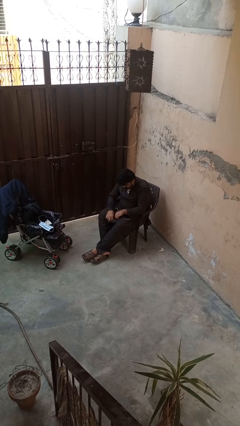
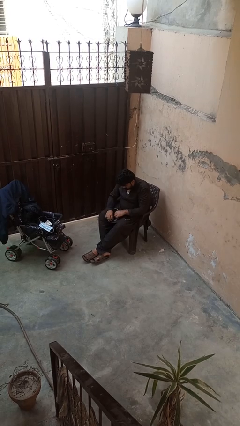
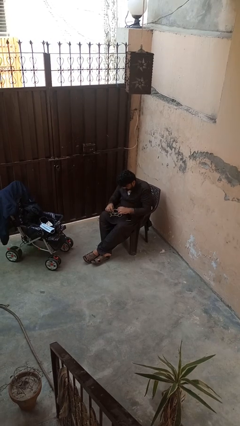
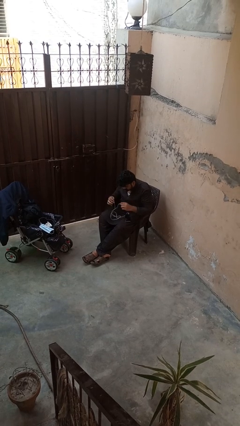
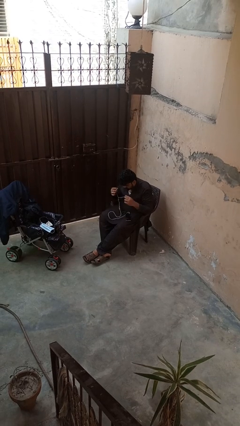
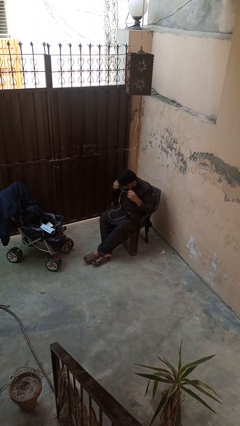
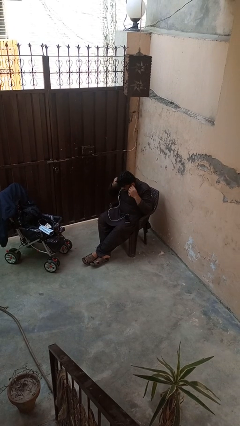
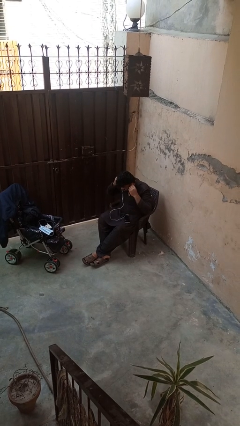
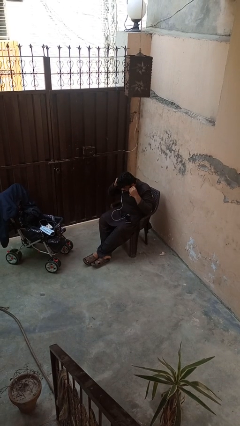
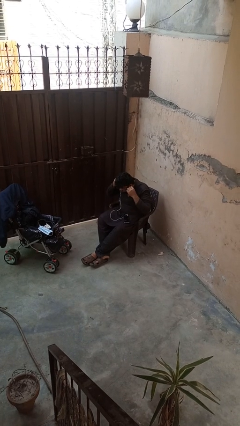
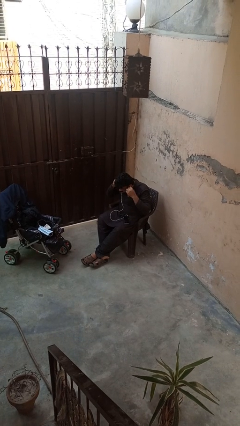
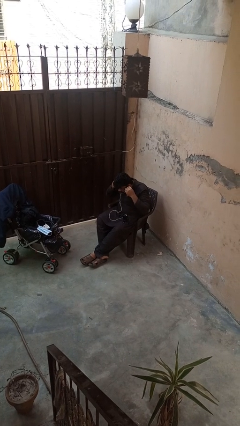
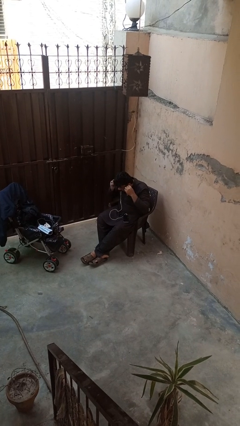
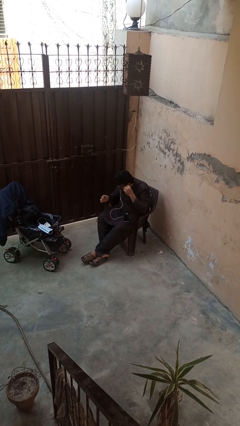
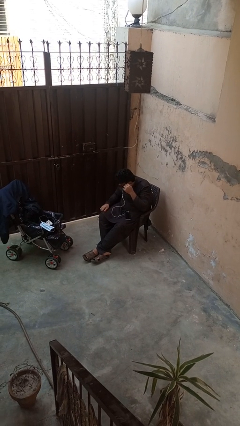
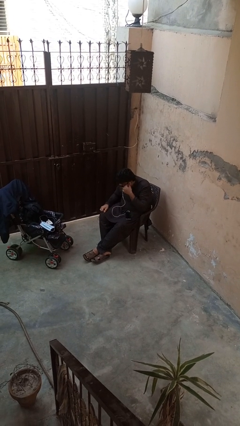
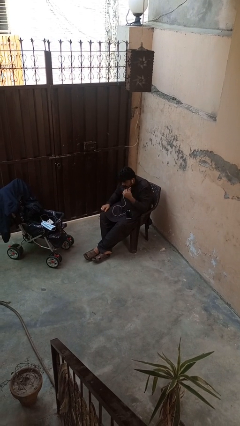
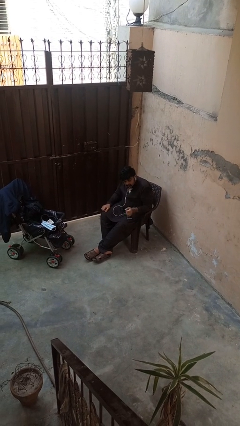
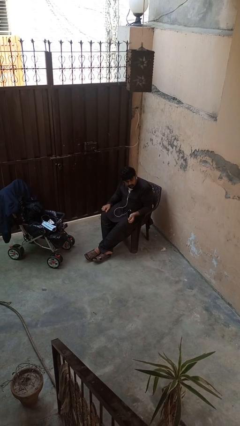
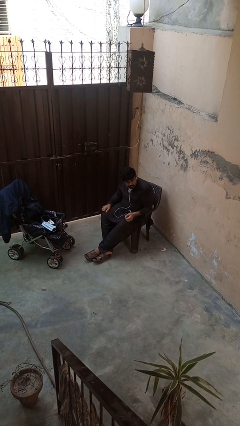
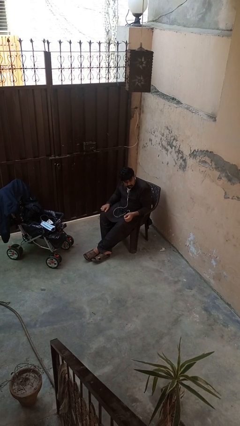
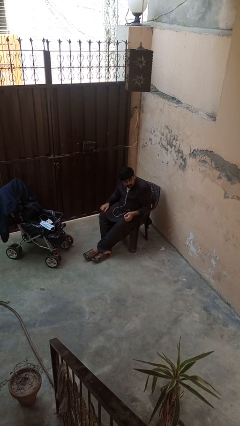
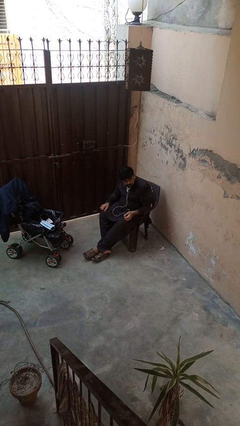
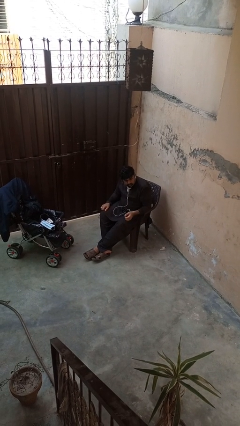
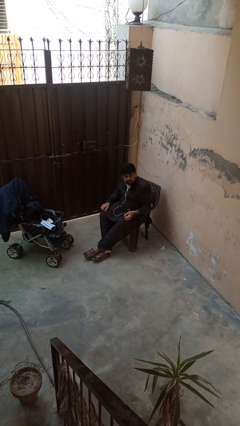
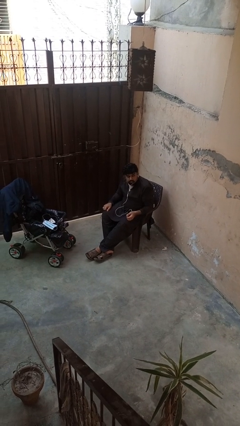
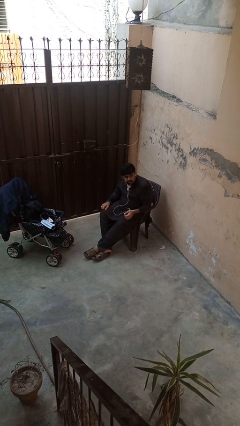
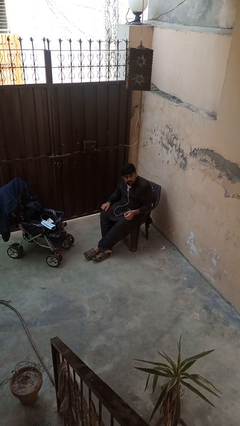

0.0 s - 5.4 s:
person puts on headphones

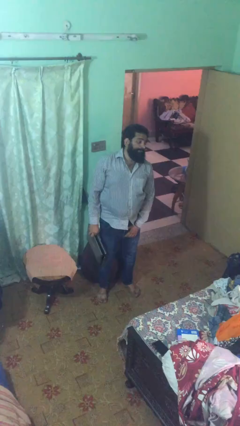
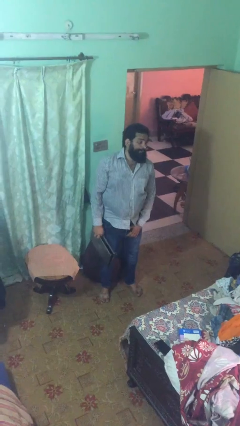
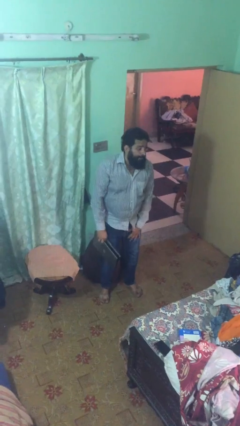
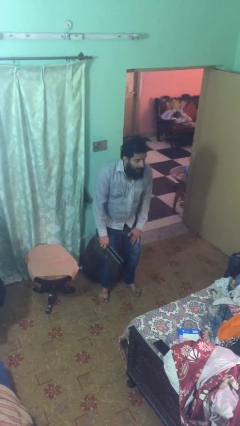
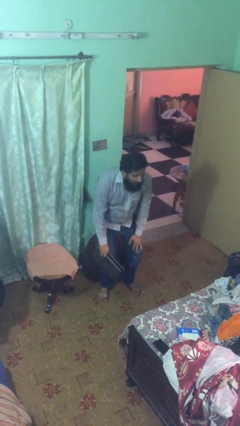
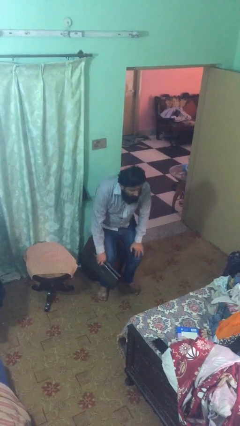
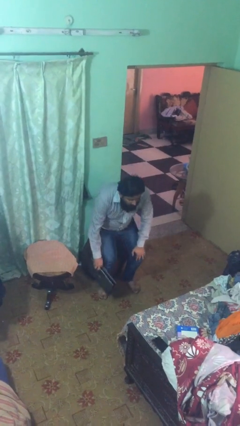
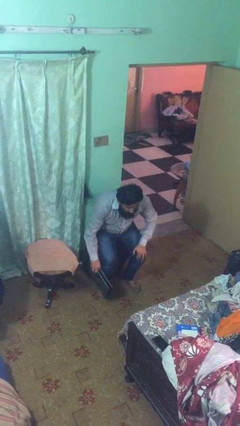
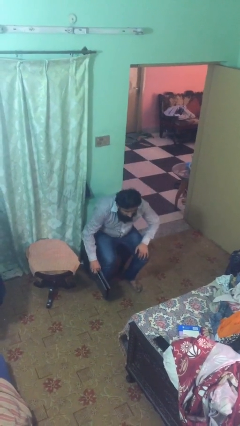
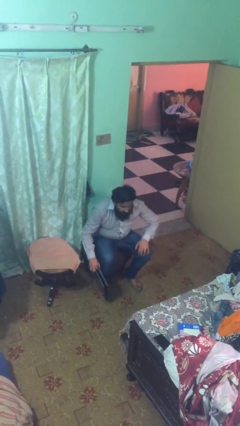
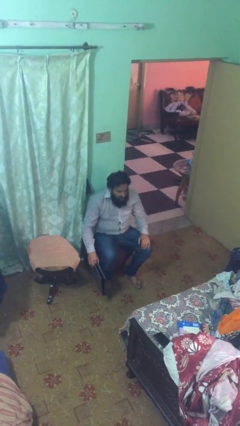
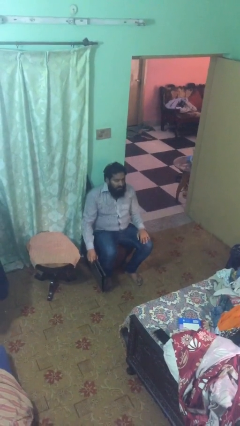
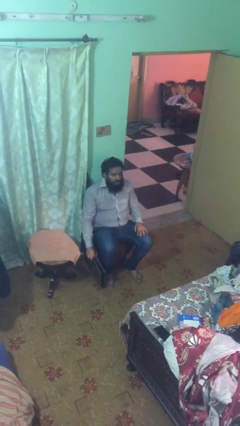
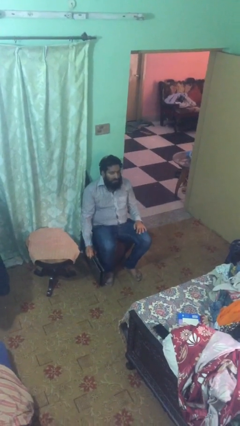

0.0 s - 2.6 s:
person sits down

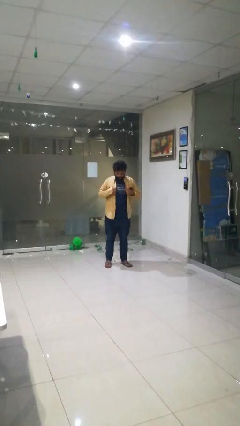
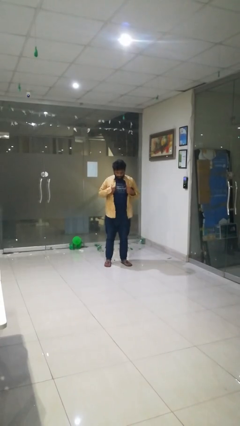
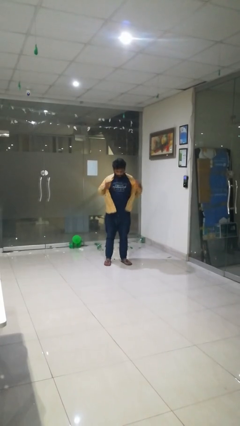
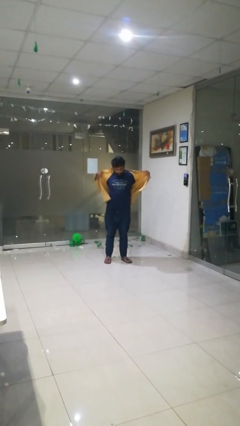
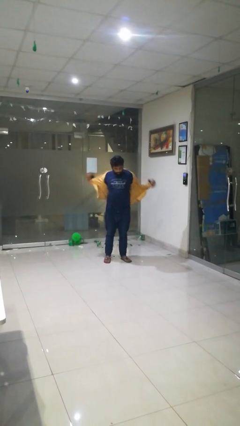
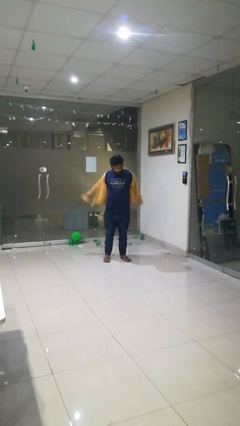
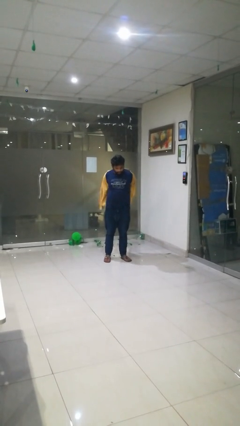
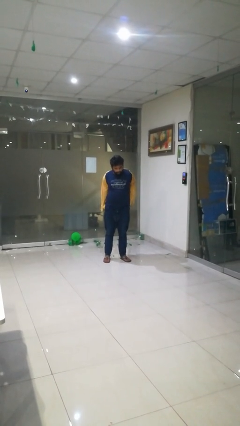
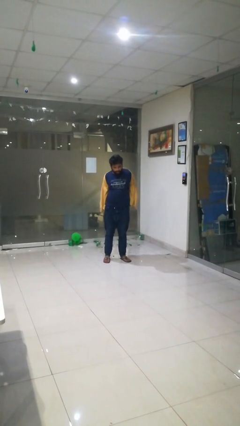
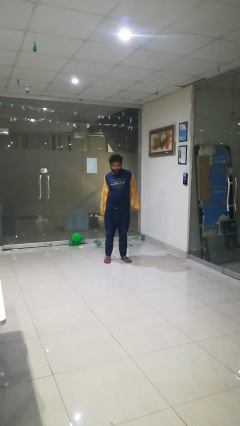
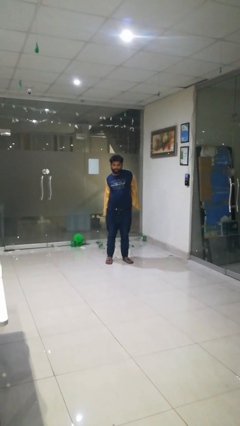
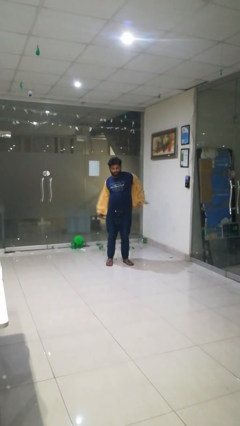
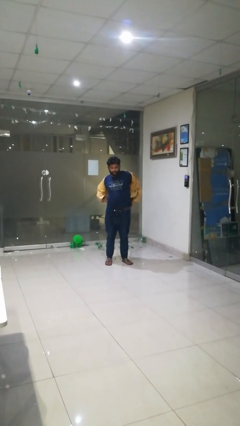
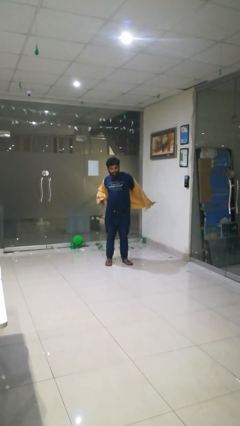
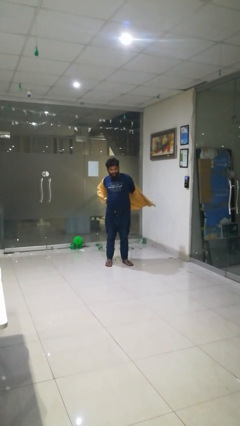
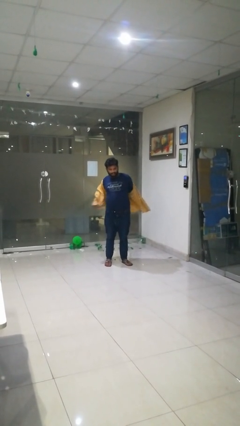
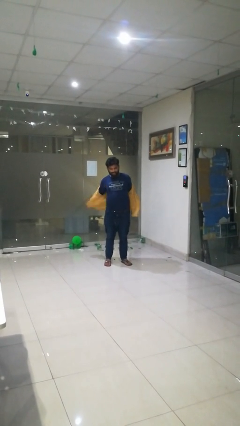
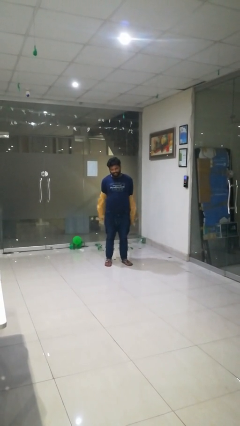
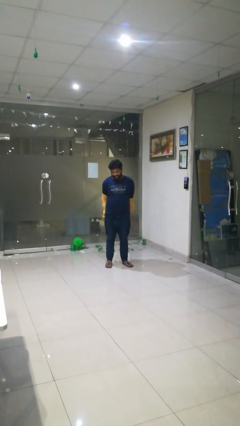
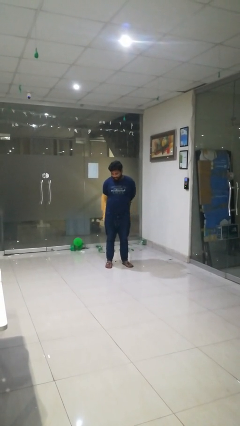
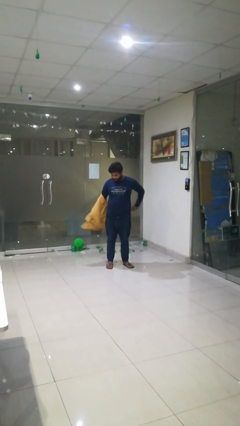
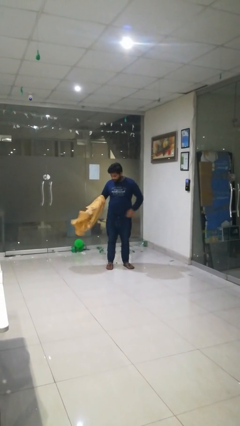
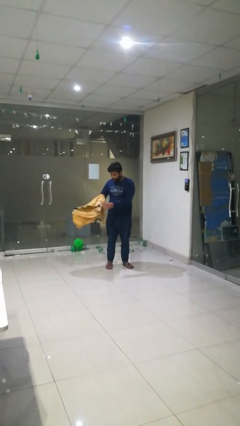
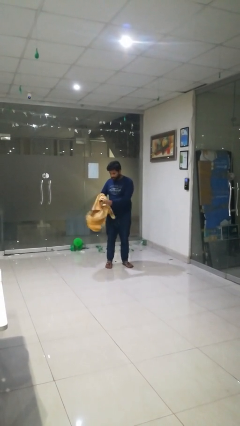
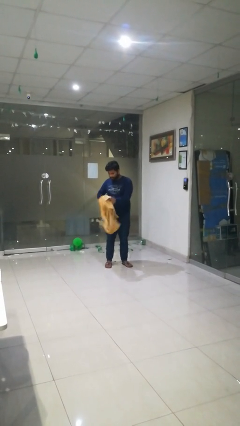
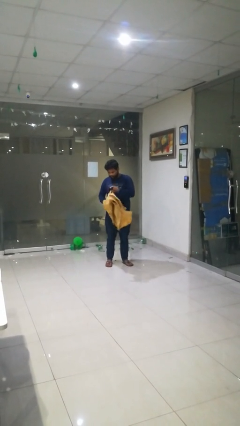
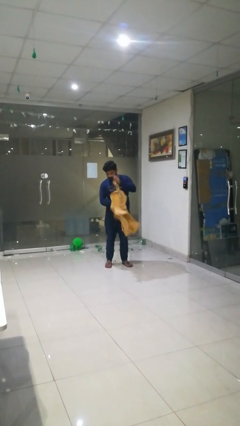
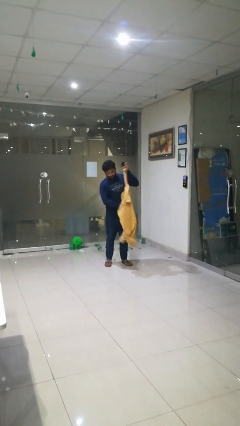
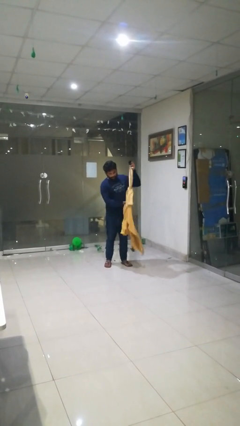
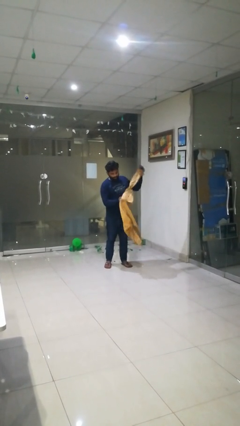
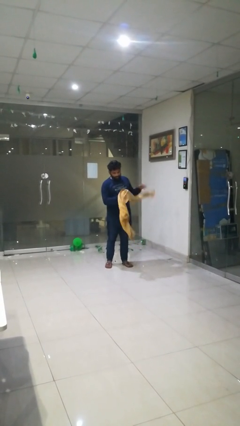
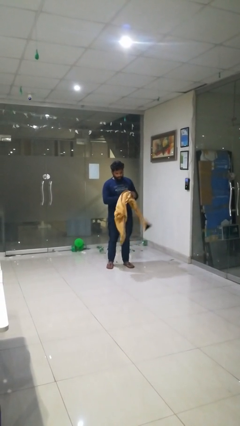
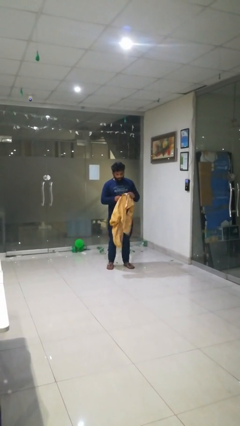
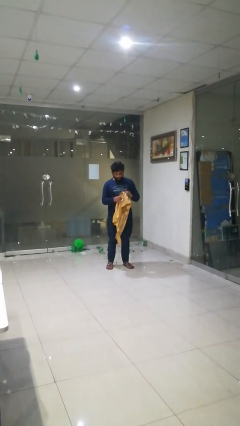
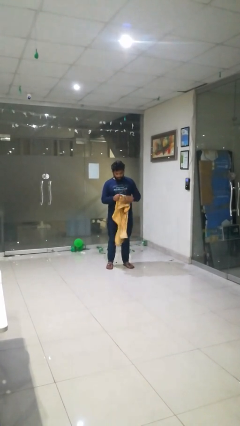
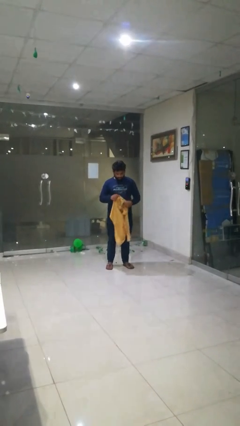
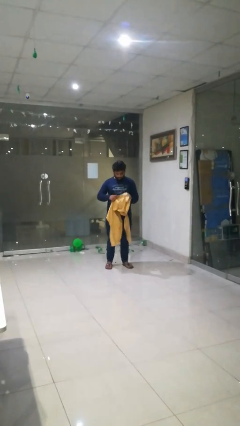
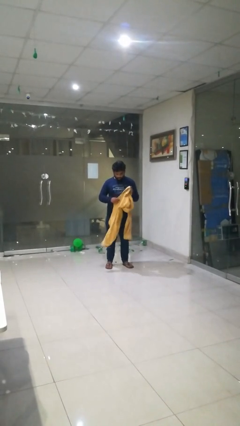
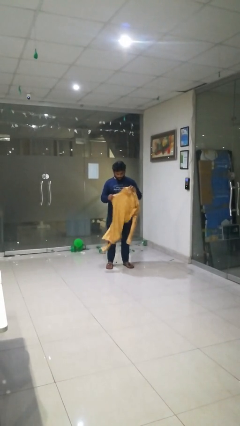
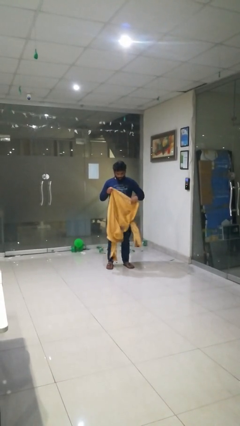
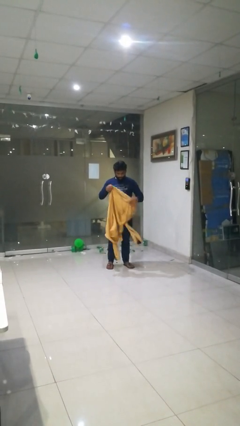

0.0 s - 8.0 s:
person takes off shirt
